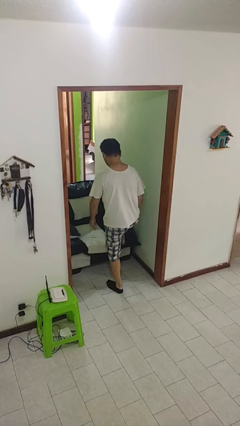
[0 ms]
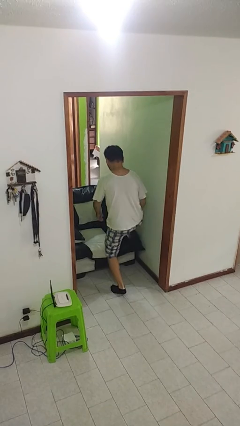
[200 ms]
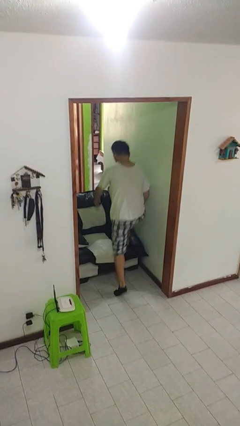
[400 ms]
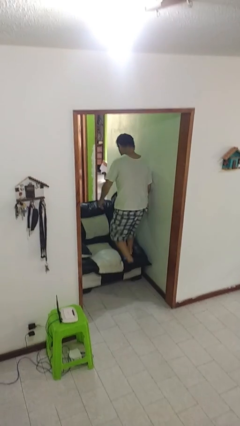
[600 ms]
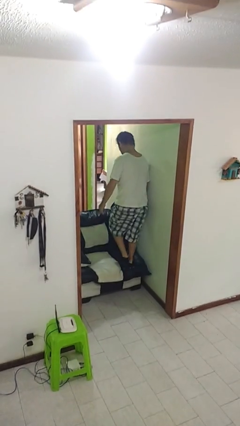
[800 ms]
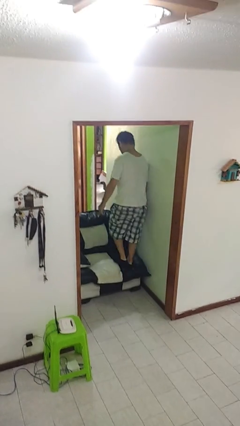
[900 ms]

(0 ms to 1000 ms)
person climbs on couch

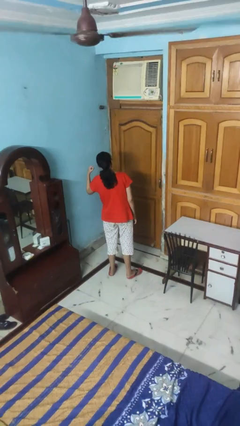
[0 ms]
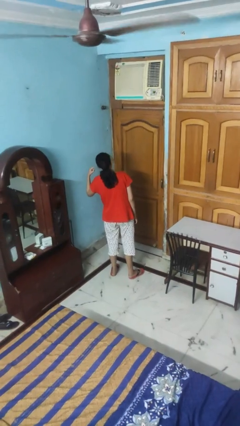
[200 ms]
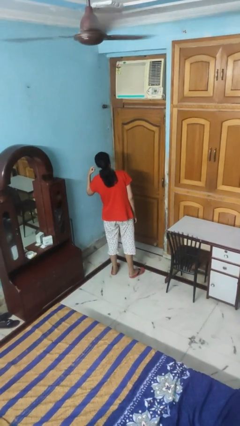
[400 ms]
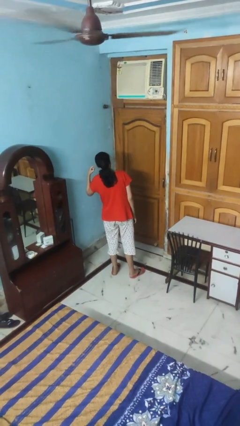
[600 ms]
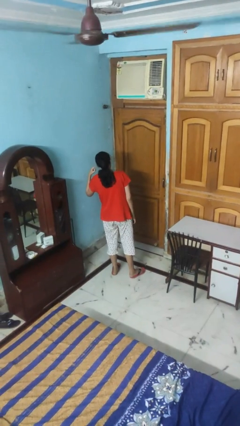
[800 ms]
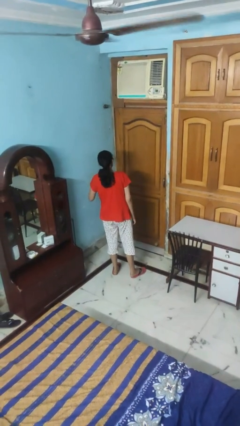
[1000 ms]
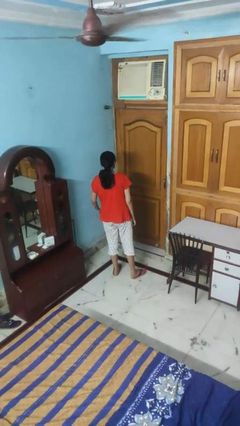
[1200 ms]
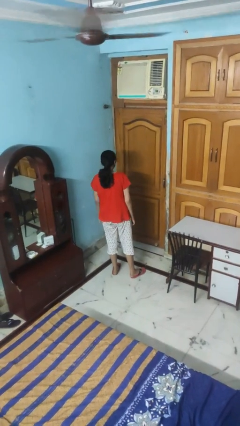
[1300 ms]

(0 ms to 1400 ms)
person gestures listen closely

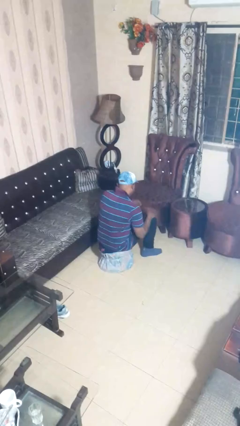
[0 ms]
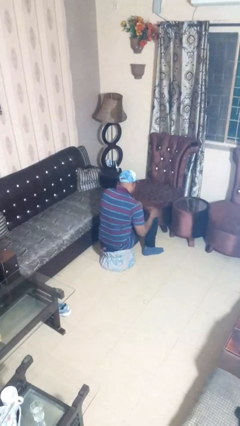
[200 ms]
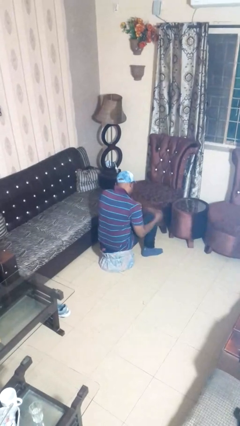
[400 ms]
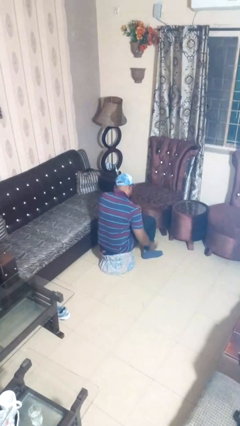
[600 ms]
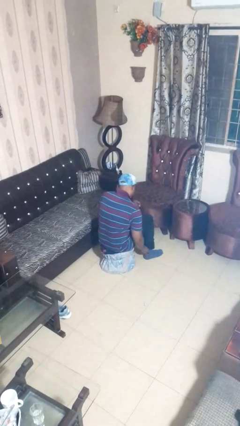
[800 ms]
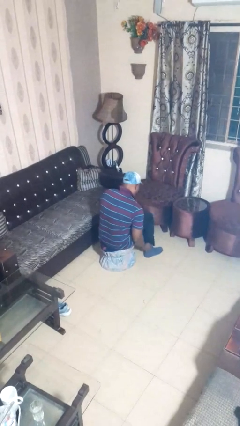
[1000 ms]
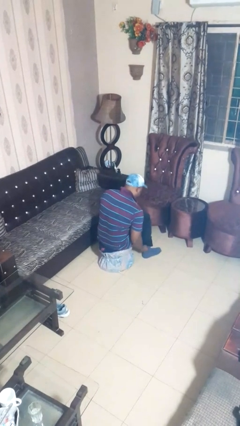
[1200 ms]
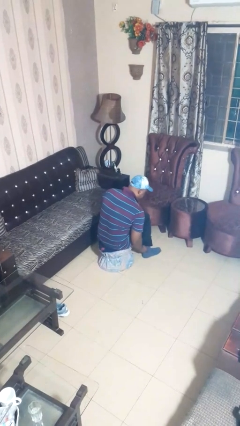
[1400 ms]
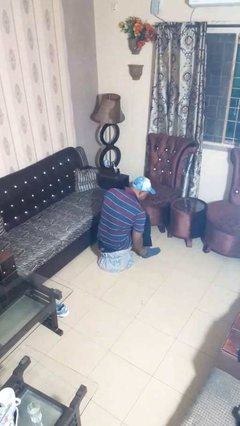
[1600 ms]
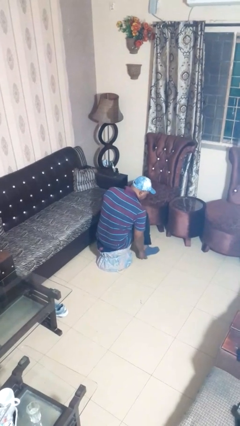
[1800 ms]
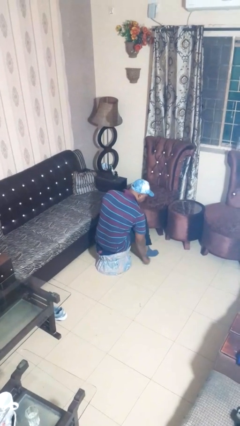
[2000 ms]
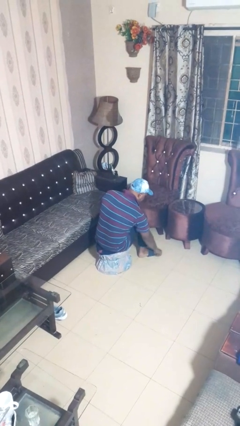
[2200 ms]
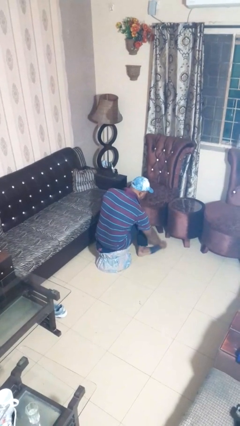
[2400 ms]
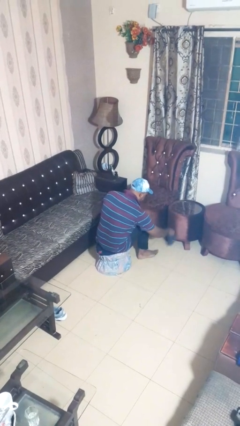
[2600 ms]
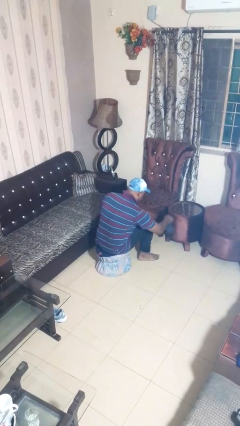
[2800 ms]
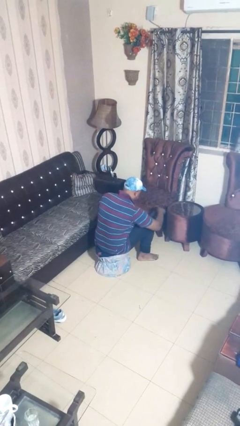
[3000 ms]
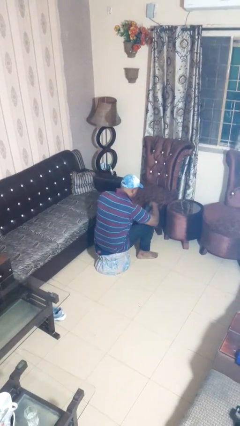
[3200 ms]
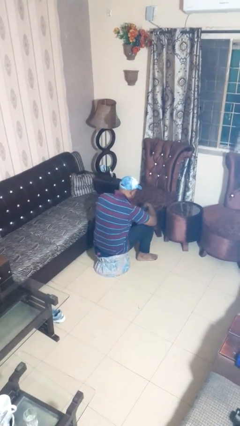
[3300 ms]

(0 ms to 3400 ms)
person takes off socks

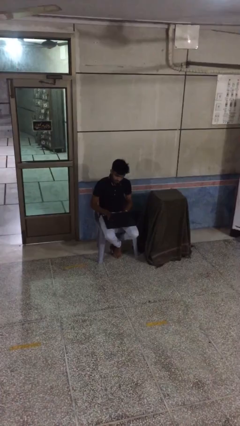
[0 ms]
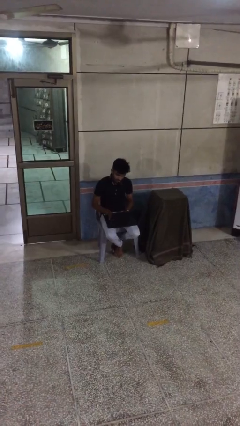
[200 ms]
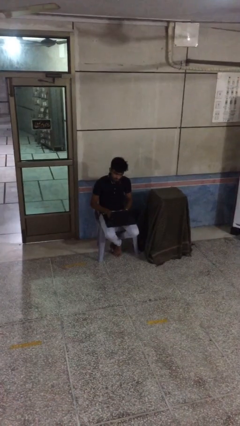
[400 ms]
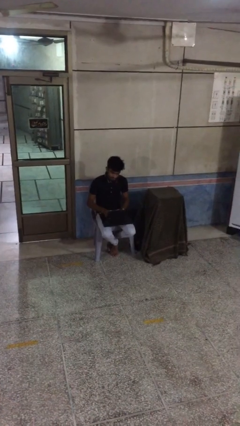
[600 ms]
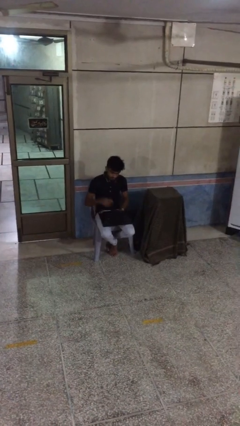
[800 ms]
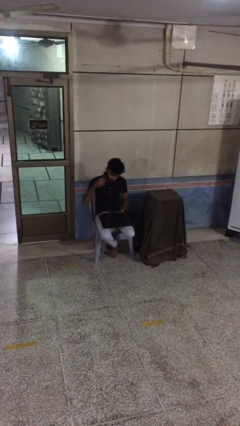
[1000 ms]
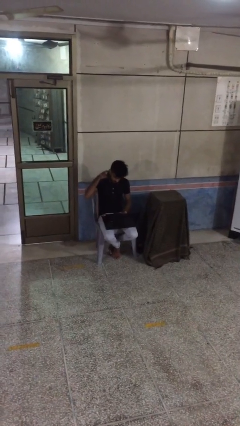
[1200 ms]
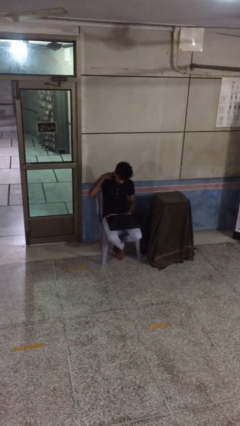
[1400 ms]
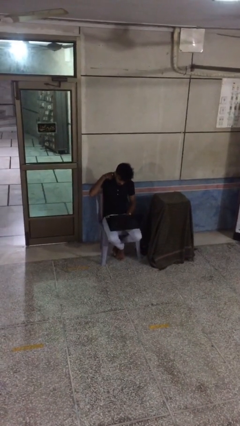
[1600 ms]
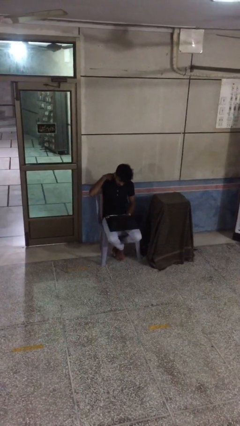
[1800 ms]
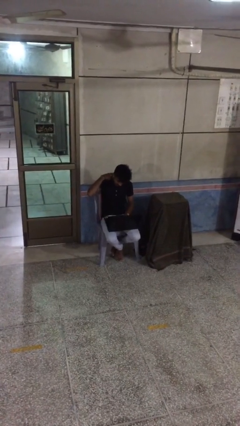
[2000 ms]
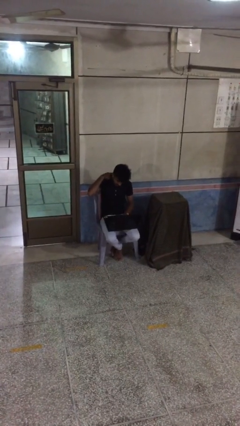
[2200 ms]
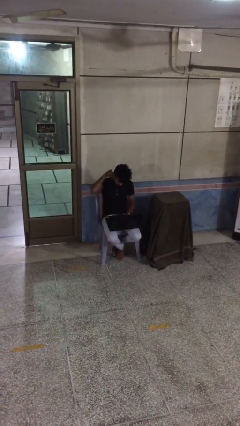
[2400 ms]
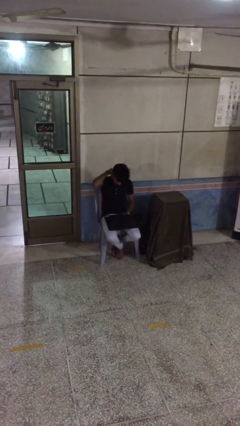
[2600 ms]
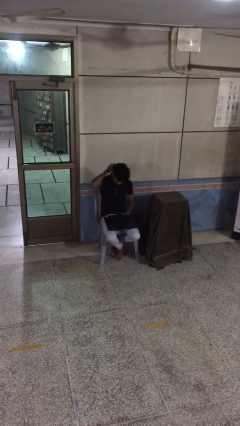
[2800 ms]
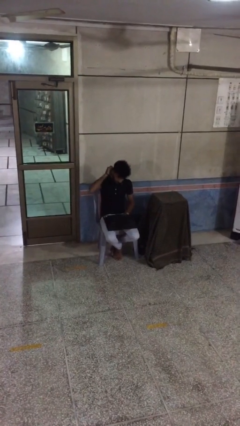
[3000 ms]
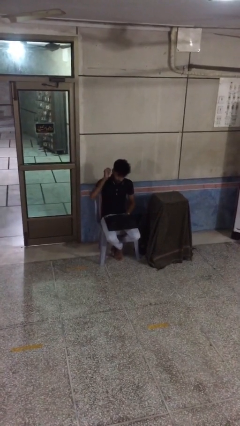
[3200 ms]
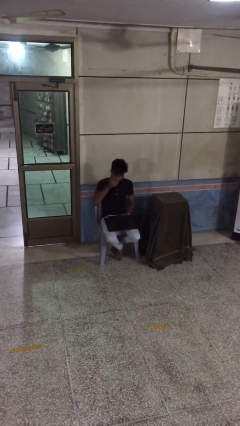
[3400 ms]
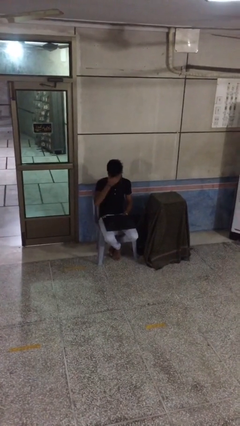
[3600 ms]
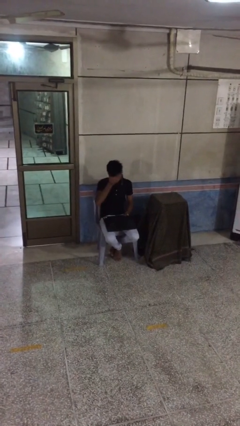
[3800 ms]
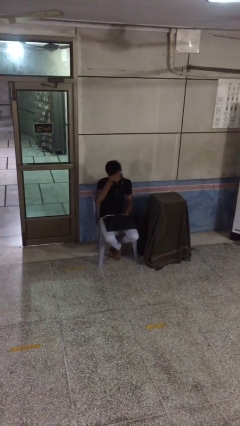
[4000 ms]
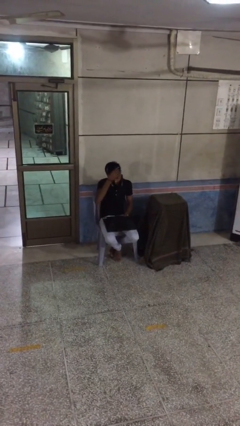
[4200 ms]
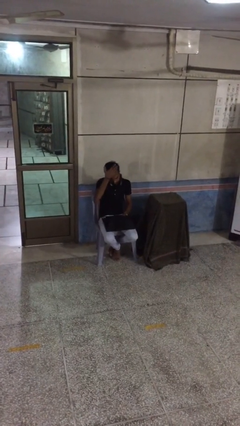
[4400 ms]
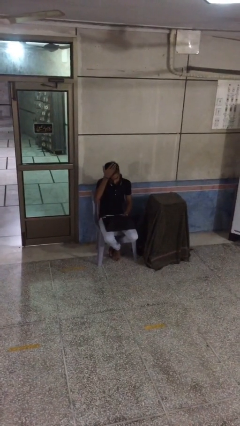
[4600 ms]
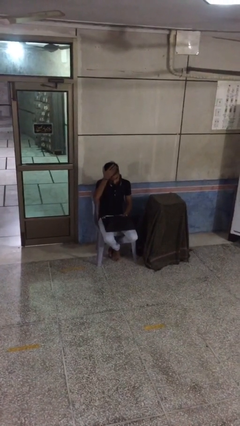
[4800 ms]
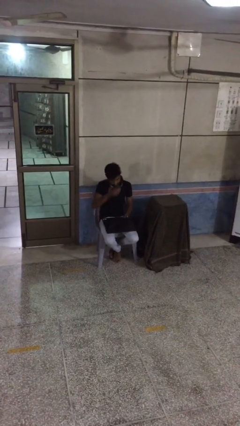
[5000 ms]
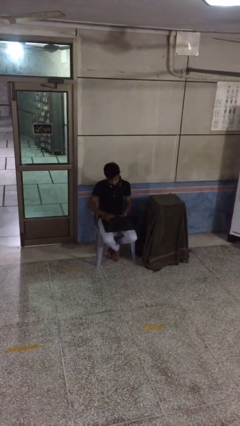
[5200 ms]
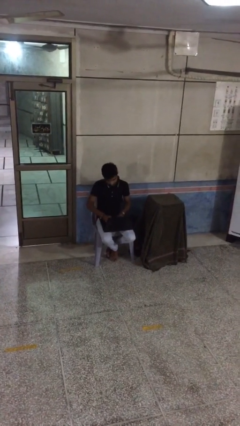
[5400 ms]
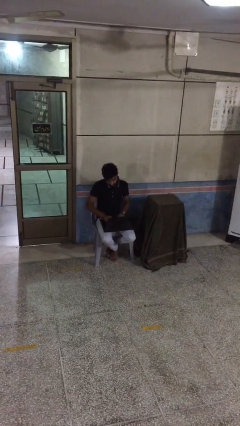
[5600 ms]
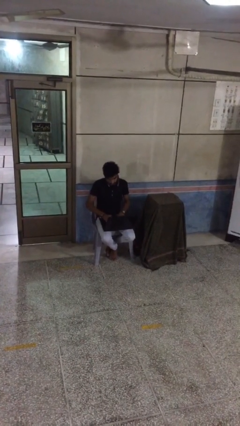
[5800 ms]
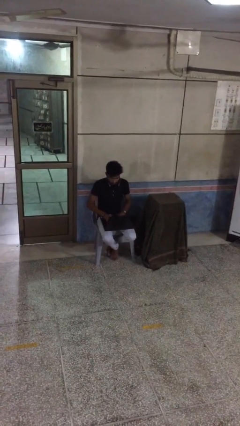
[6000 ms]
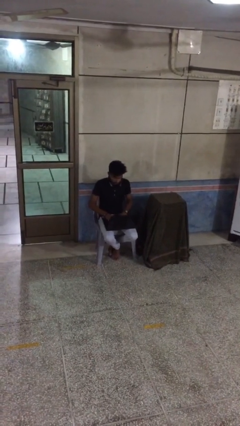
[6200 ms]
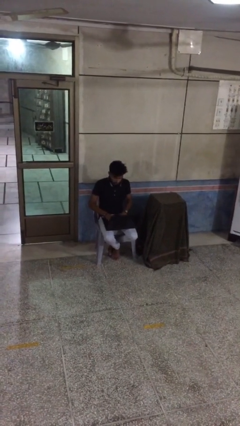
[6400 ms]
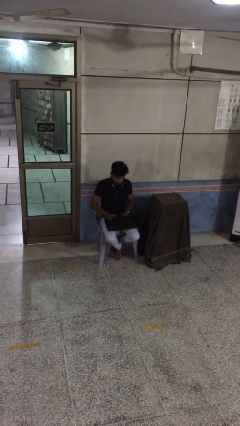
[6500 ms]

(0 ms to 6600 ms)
person interacts with laptop

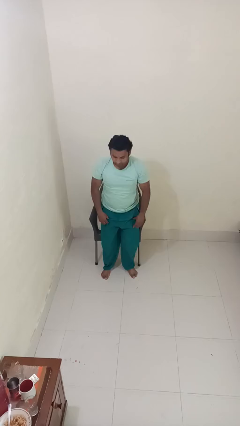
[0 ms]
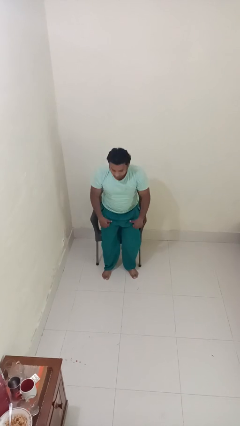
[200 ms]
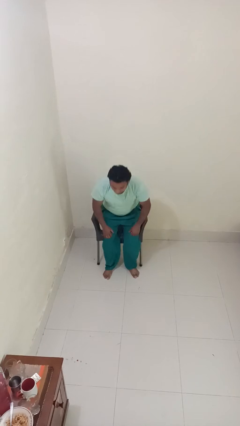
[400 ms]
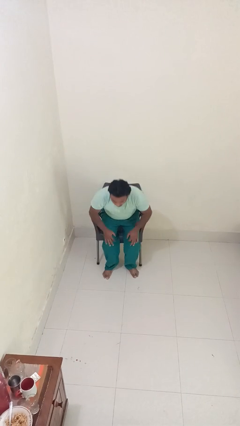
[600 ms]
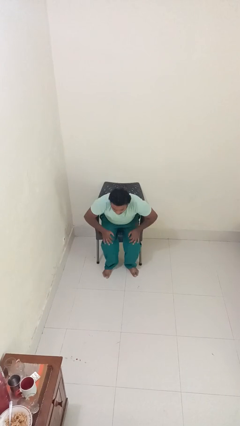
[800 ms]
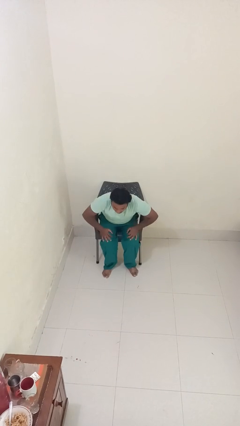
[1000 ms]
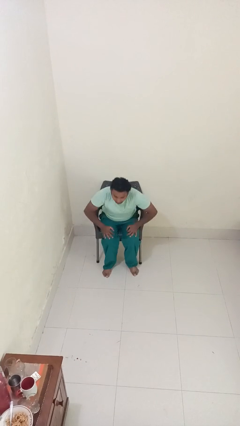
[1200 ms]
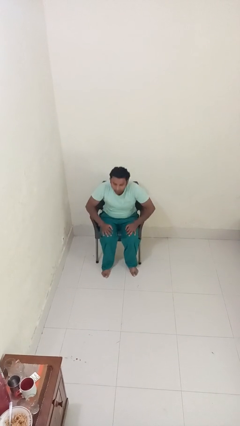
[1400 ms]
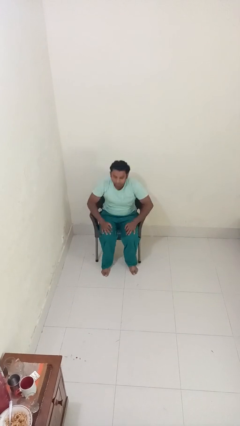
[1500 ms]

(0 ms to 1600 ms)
person sits down

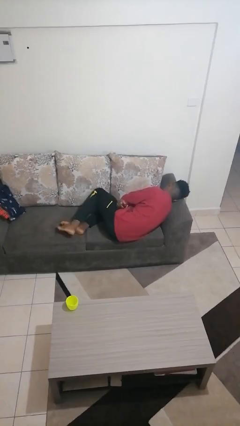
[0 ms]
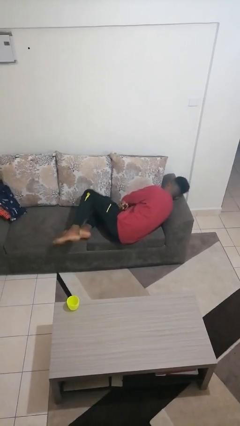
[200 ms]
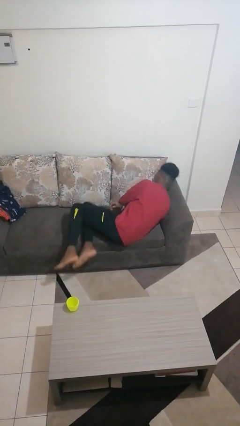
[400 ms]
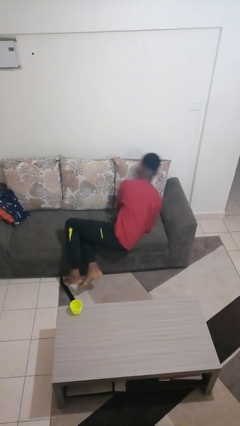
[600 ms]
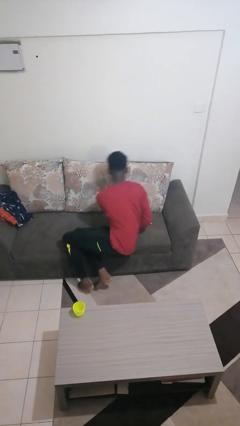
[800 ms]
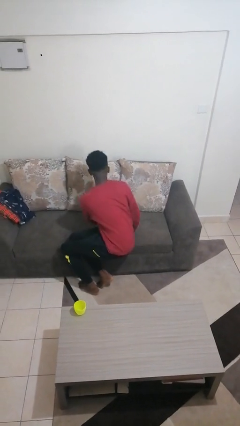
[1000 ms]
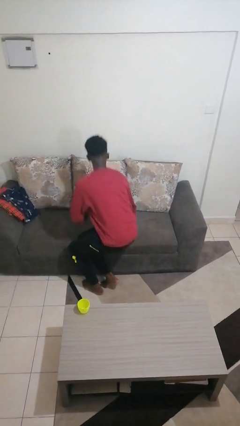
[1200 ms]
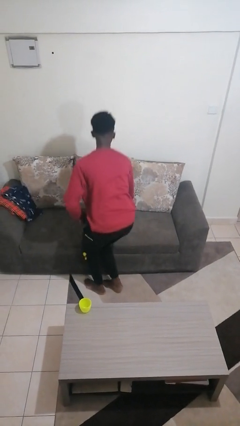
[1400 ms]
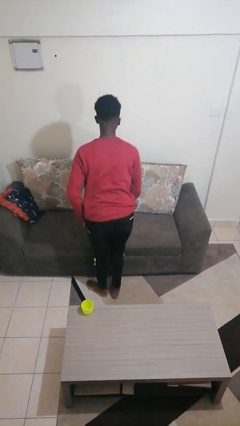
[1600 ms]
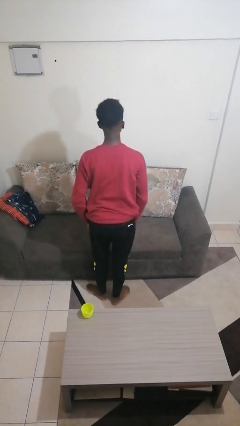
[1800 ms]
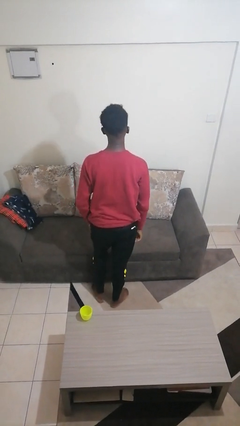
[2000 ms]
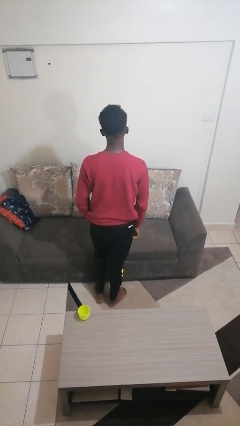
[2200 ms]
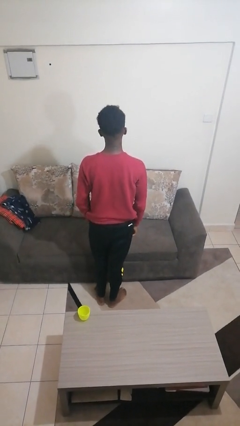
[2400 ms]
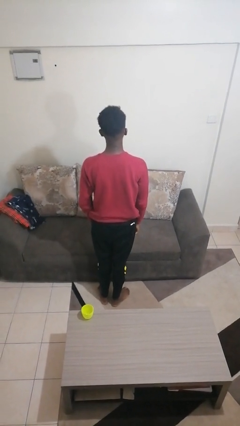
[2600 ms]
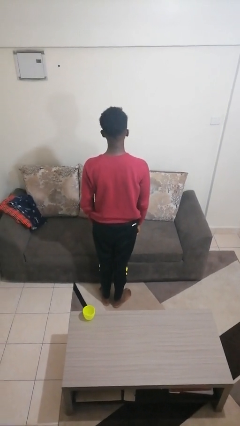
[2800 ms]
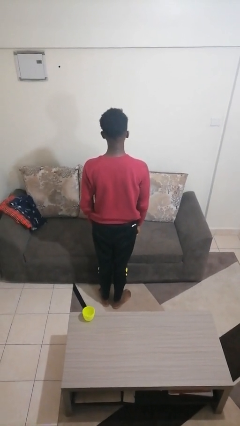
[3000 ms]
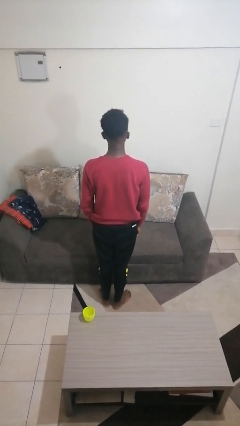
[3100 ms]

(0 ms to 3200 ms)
person stands up
